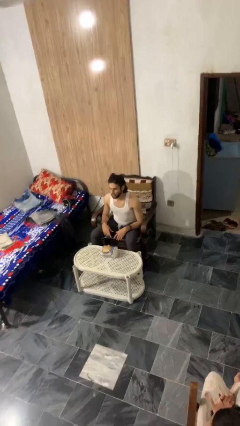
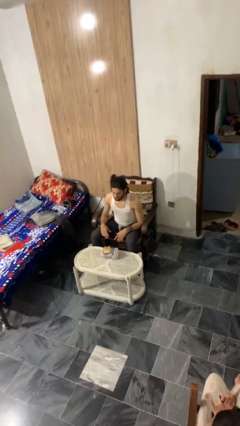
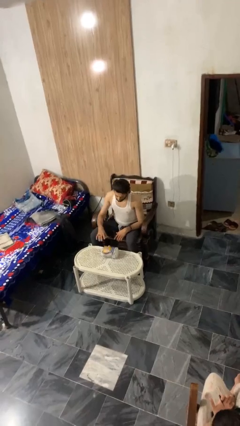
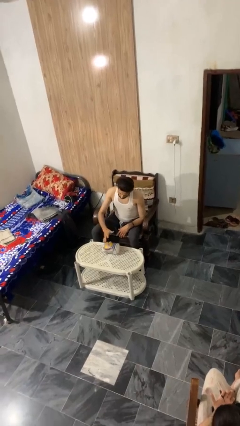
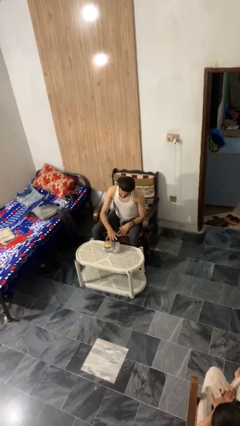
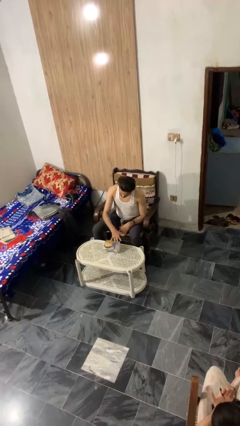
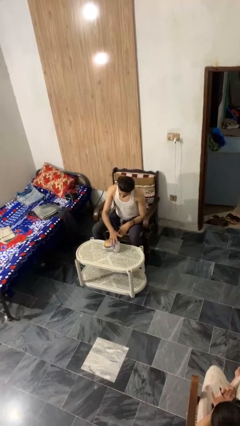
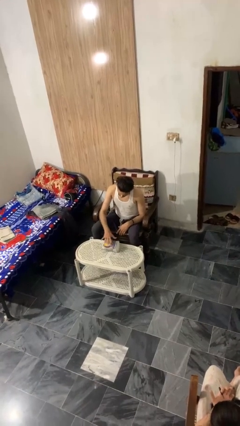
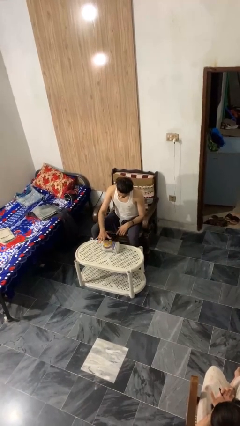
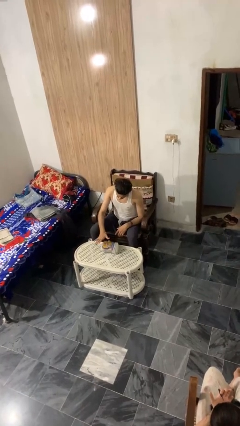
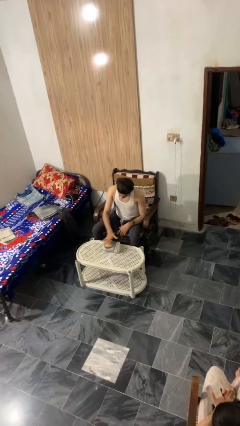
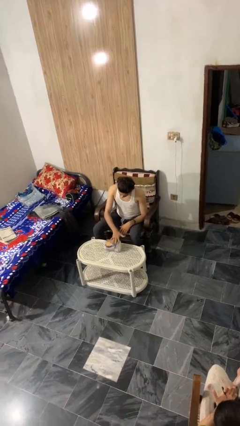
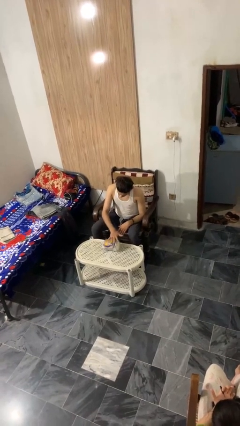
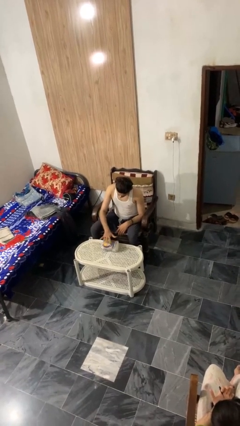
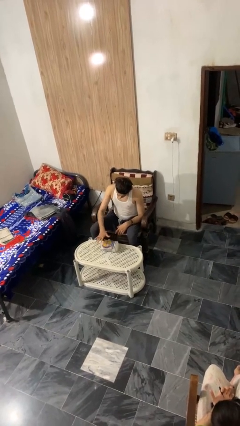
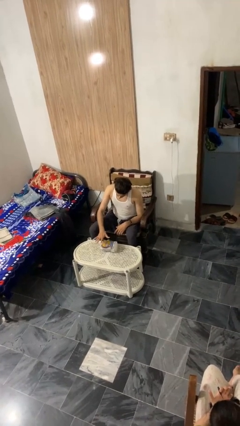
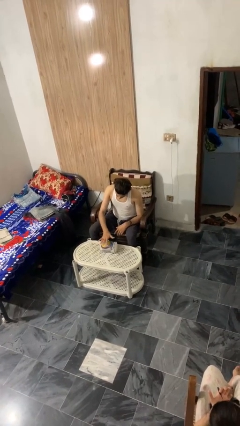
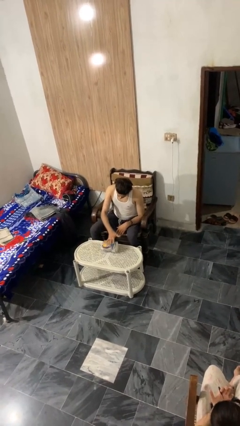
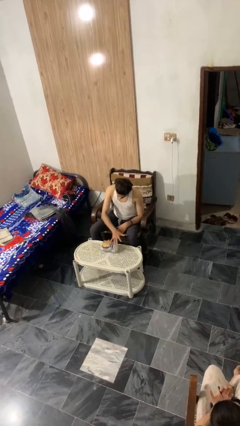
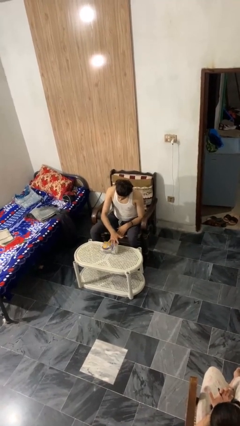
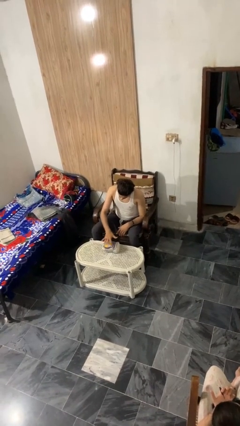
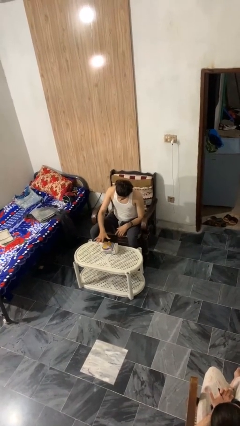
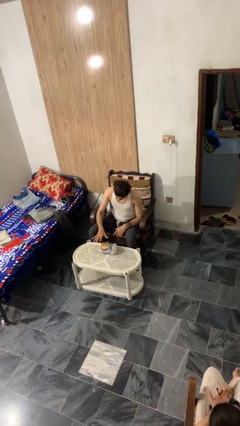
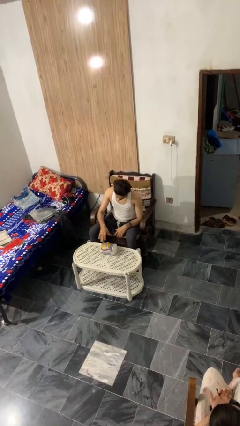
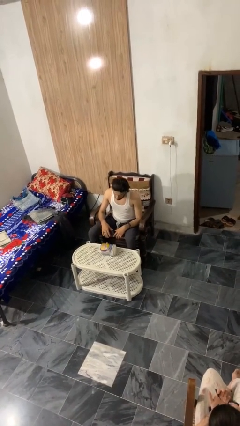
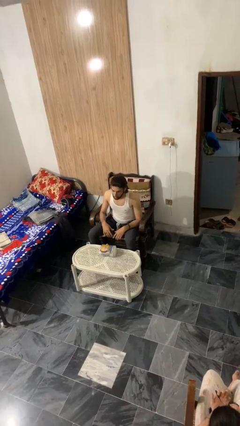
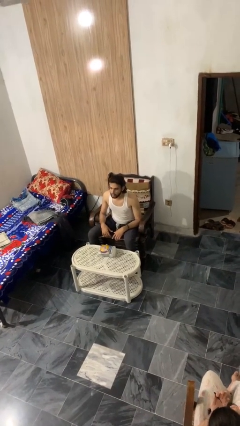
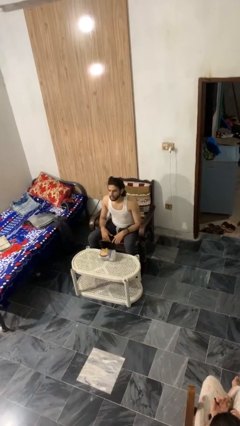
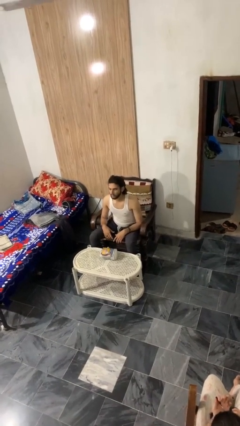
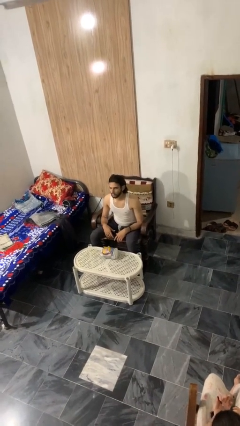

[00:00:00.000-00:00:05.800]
person waves hand over object

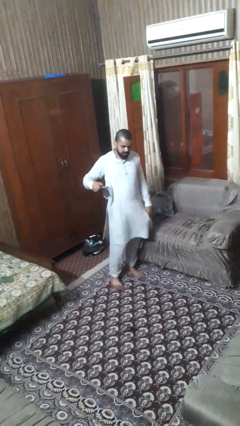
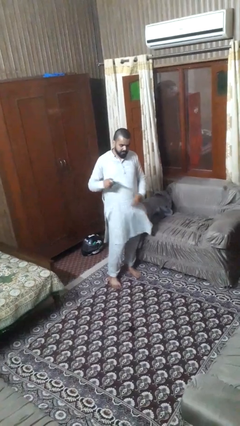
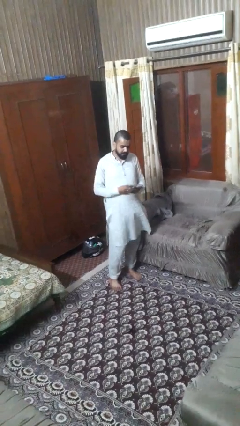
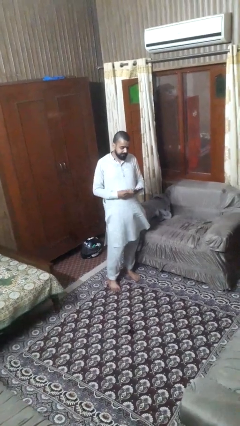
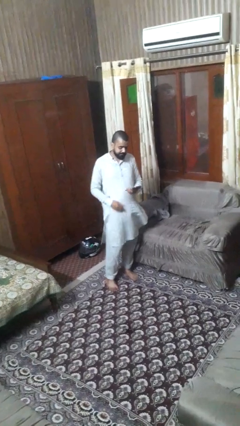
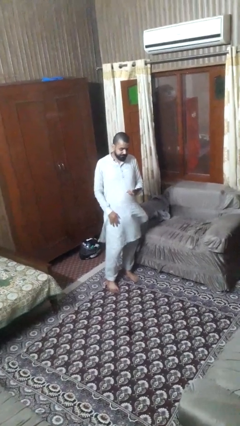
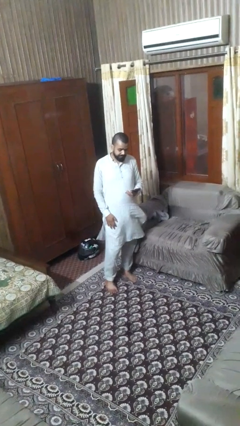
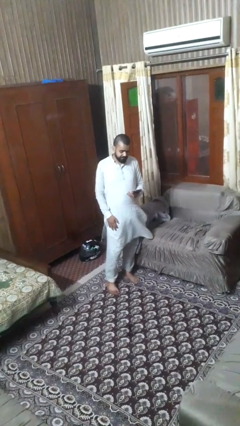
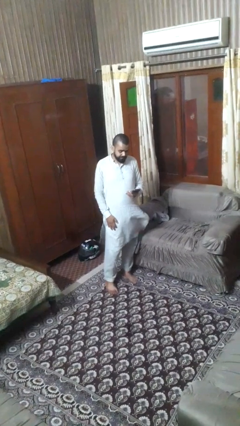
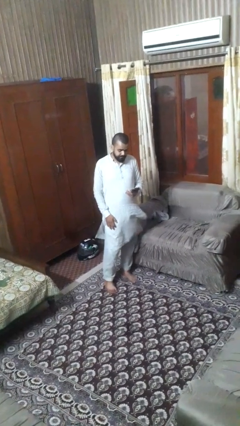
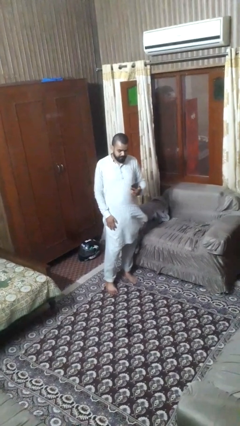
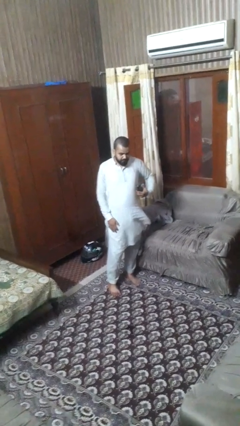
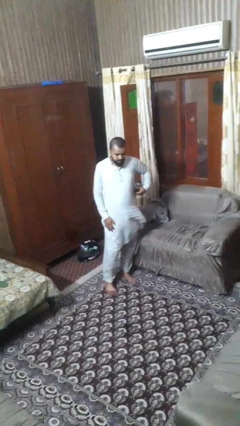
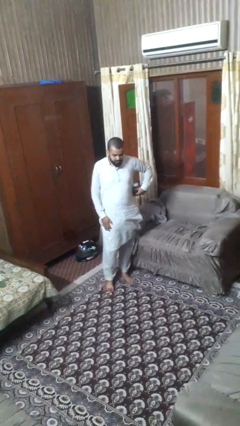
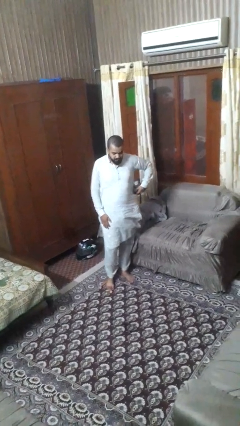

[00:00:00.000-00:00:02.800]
person takes phone from pocket

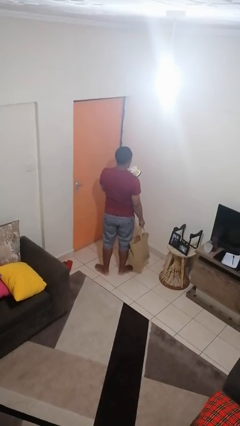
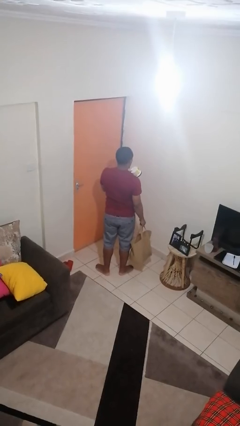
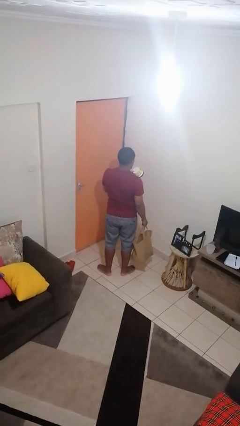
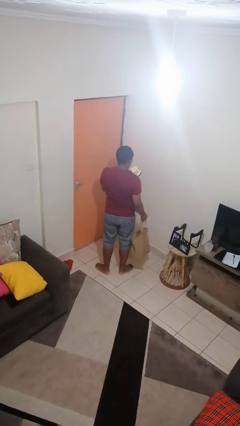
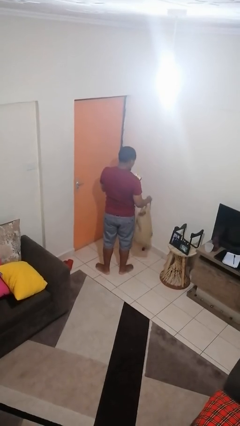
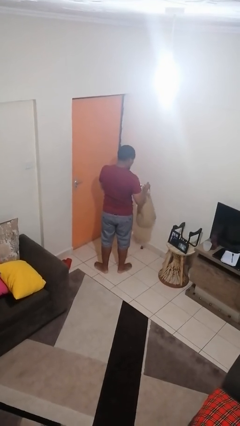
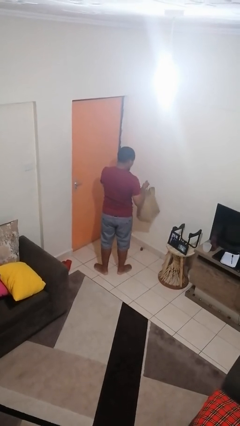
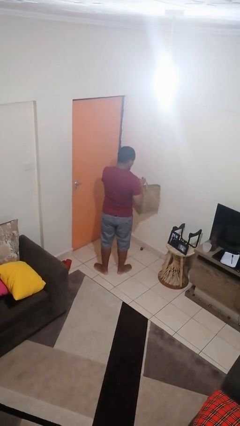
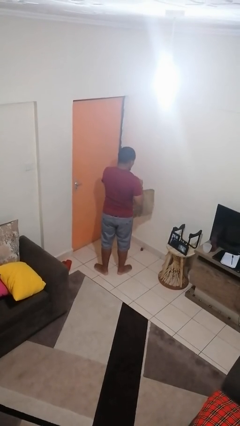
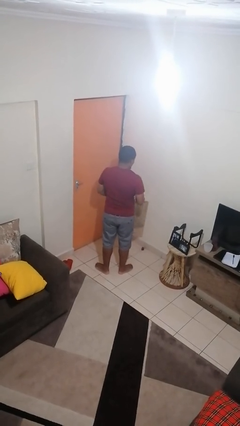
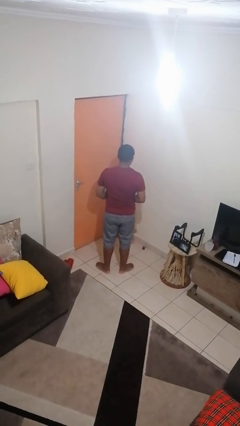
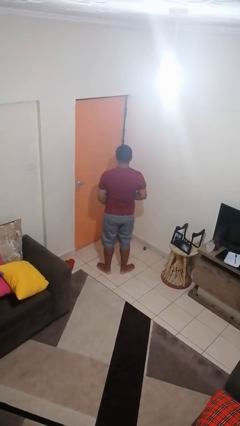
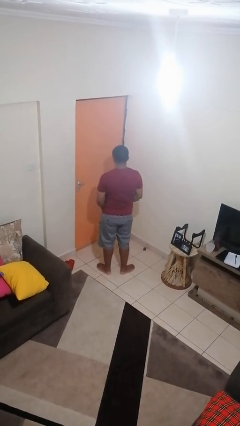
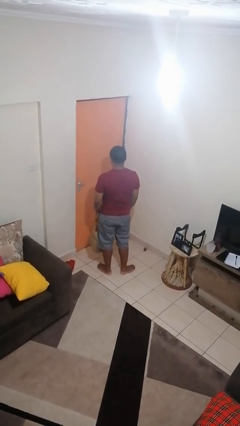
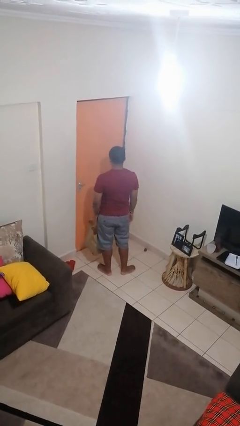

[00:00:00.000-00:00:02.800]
person puts object into bag

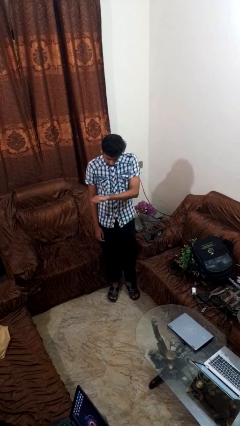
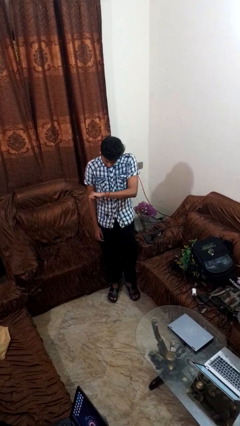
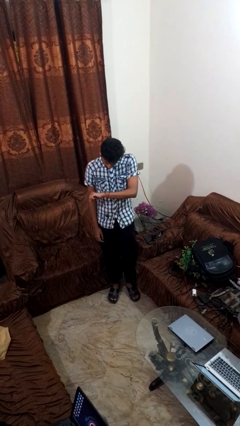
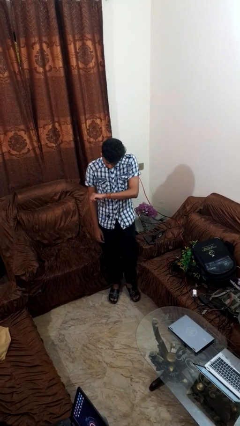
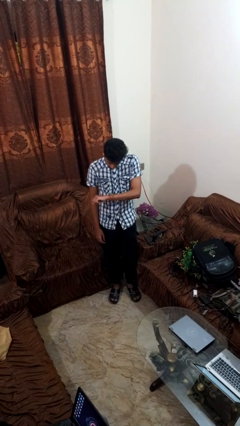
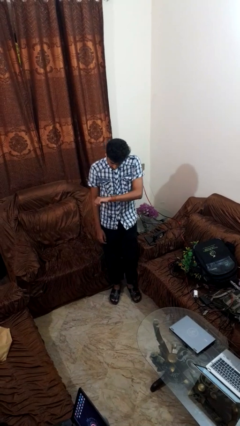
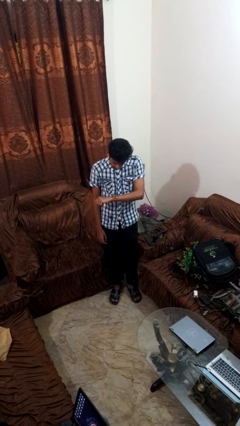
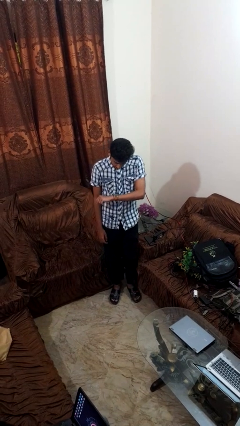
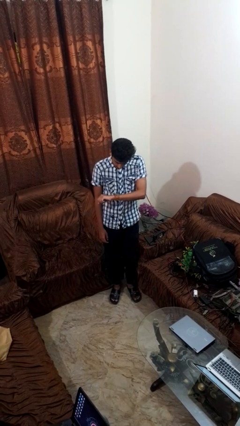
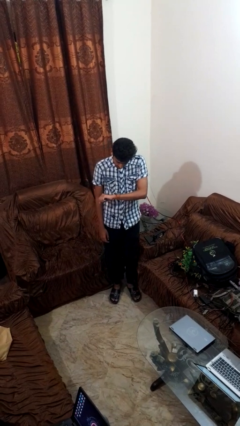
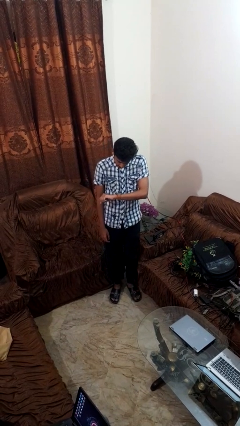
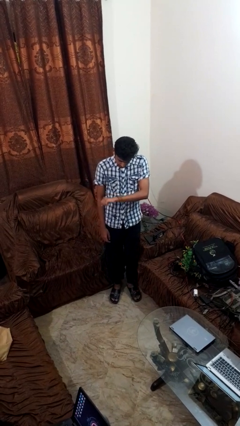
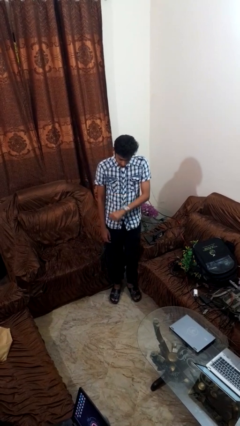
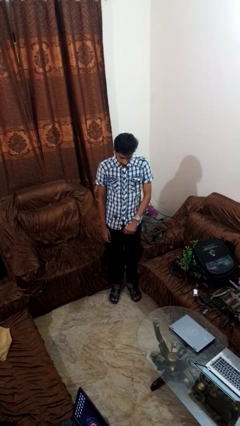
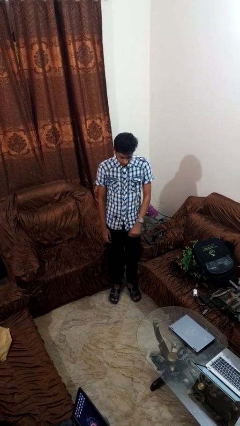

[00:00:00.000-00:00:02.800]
person looks at wristwatch

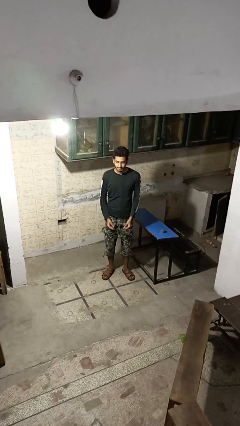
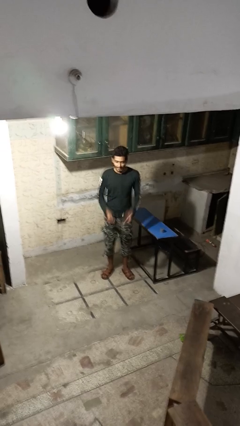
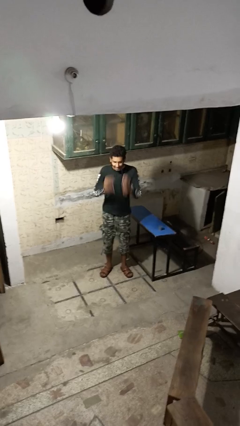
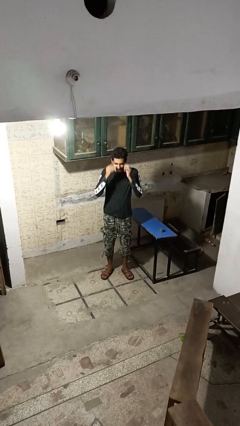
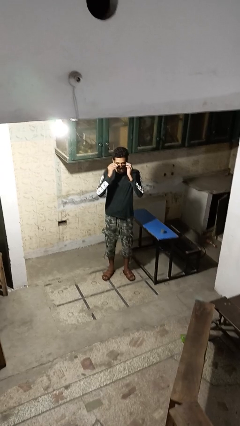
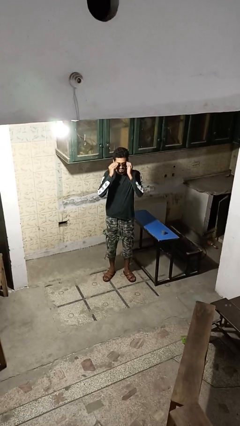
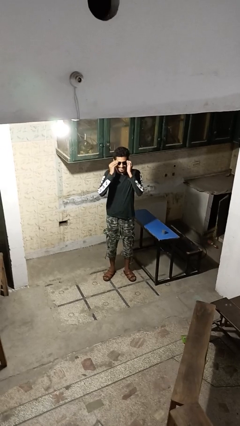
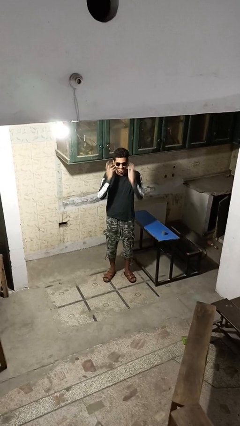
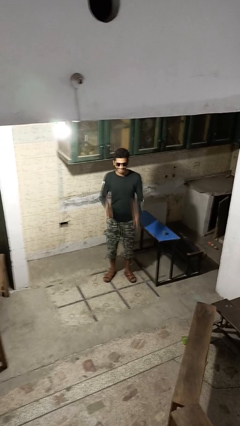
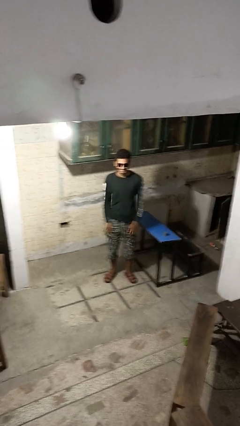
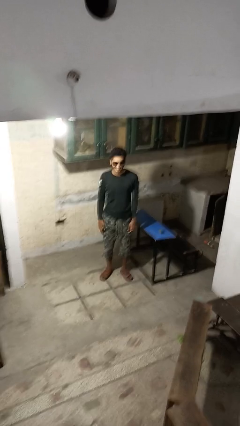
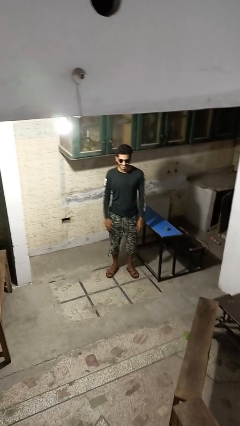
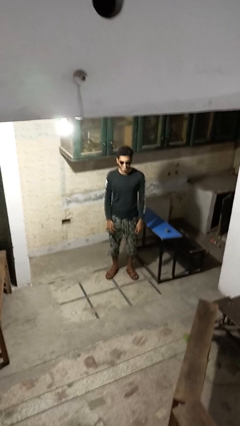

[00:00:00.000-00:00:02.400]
person puts on sunglasses

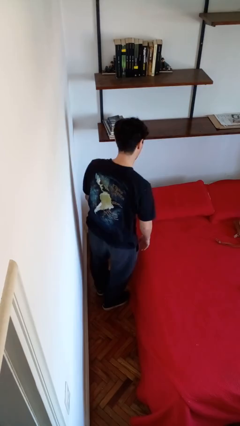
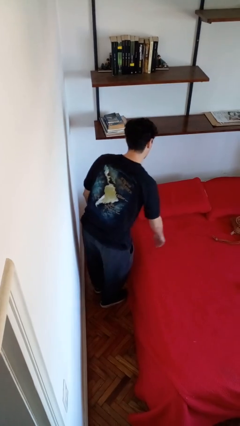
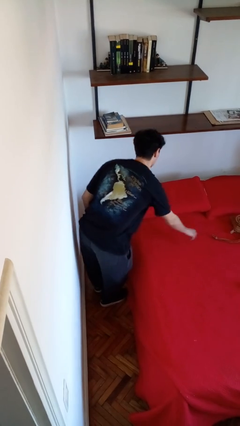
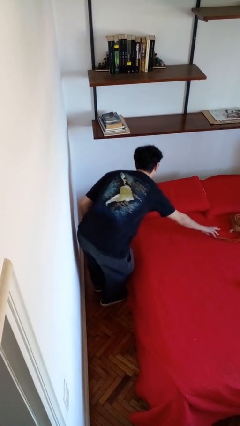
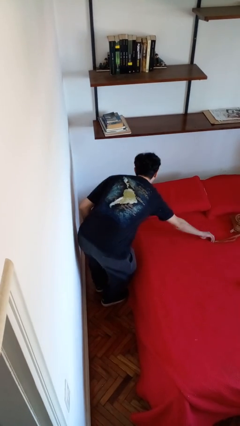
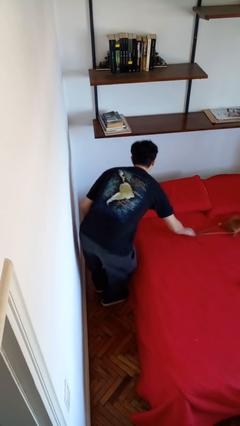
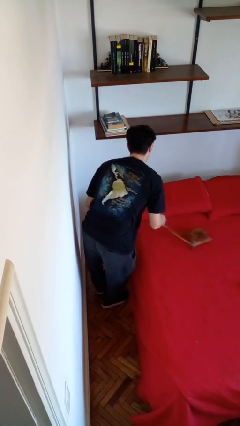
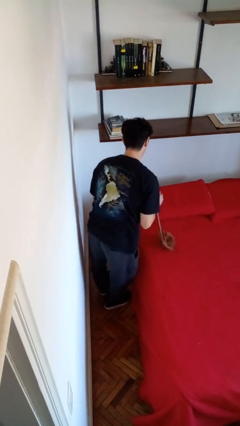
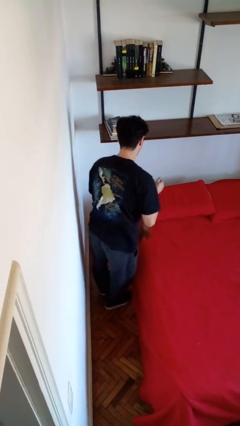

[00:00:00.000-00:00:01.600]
person picks up object from bed
